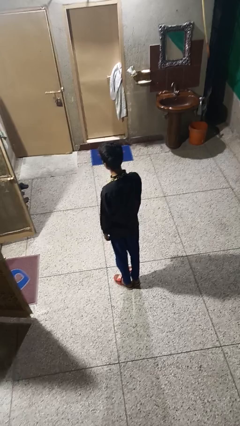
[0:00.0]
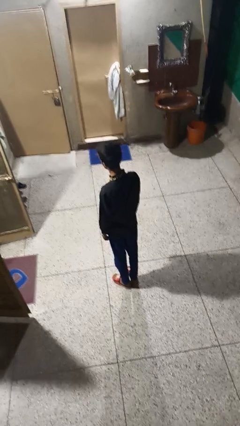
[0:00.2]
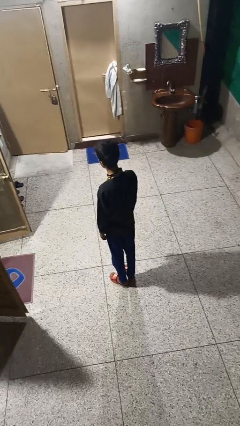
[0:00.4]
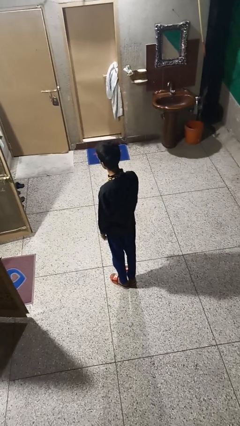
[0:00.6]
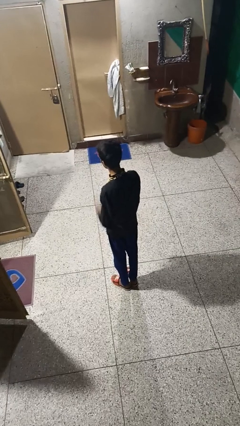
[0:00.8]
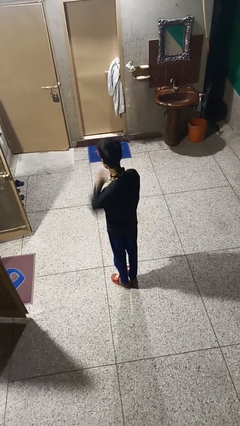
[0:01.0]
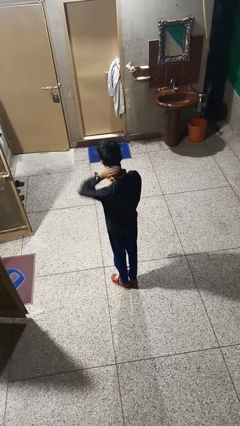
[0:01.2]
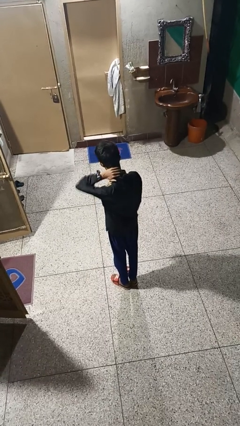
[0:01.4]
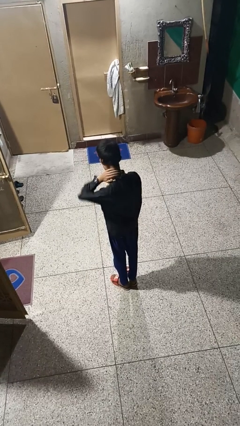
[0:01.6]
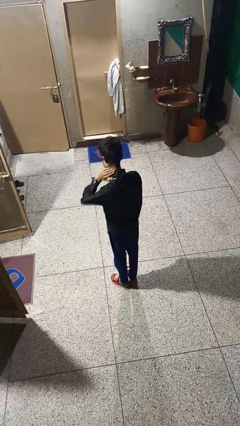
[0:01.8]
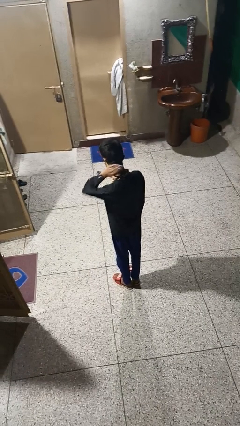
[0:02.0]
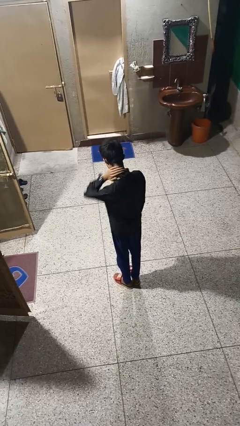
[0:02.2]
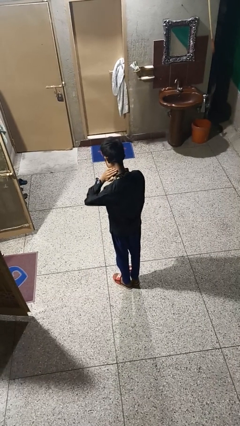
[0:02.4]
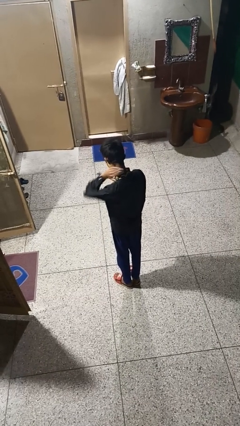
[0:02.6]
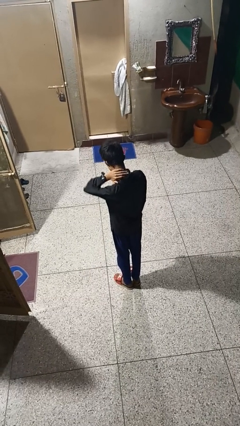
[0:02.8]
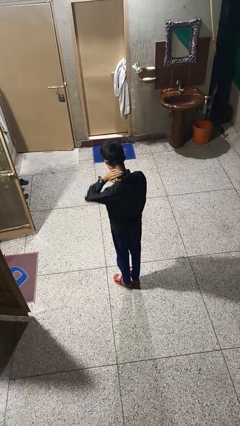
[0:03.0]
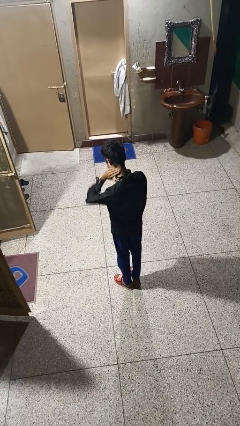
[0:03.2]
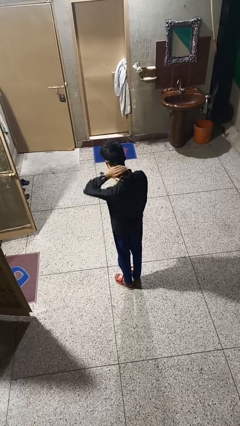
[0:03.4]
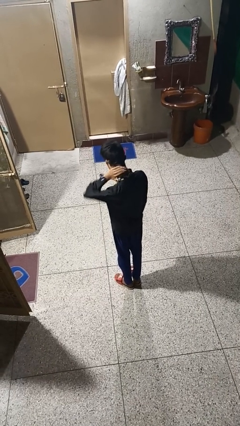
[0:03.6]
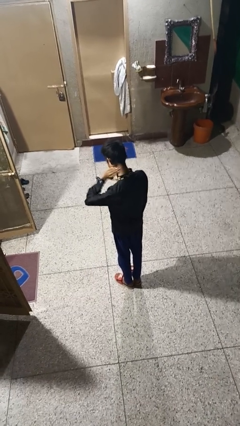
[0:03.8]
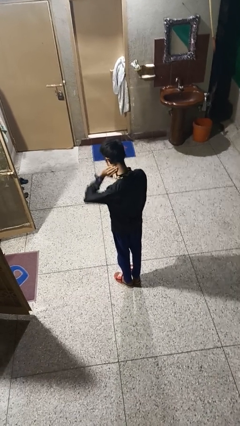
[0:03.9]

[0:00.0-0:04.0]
person rubs neck

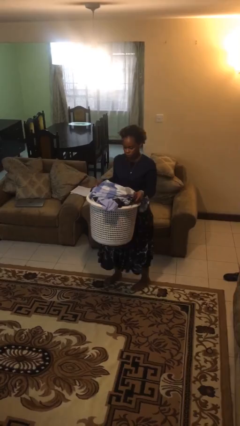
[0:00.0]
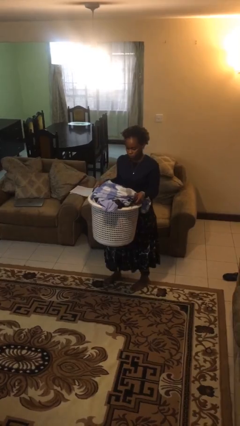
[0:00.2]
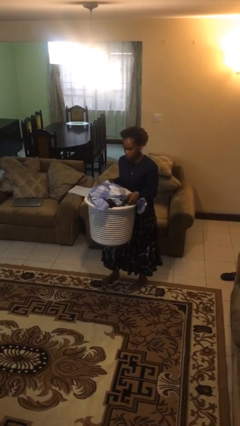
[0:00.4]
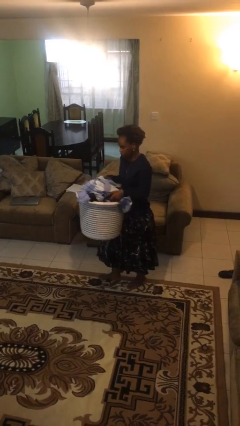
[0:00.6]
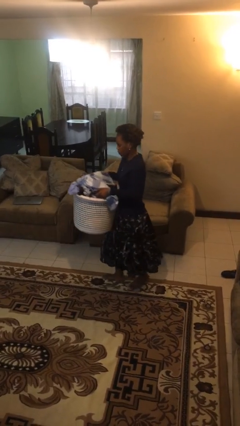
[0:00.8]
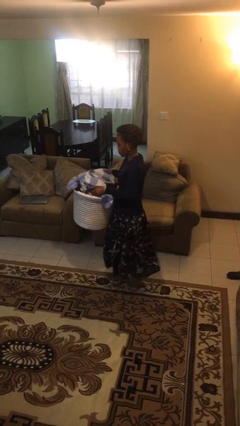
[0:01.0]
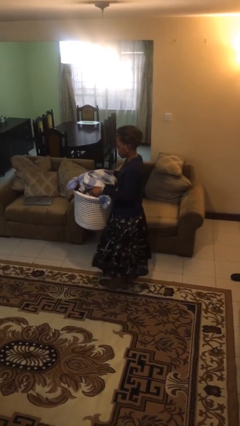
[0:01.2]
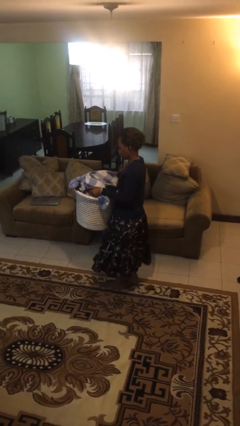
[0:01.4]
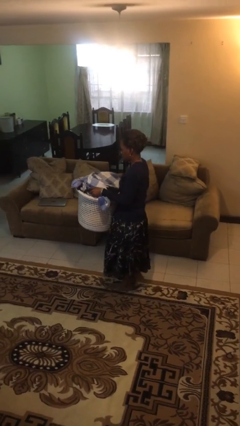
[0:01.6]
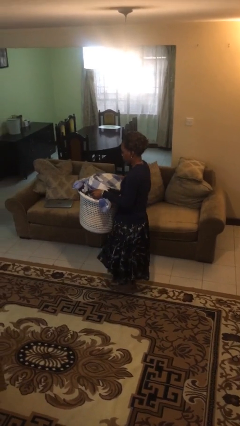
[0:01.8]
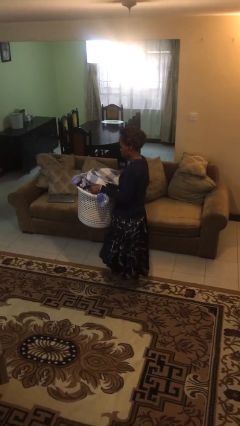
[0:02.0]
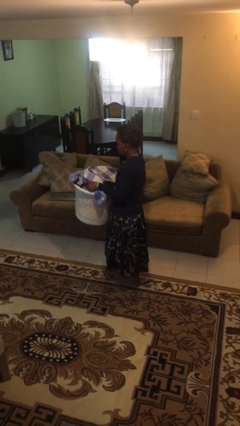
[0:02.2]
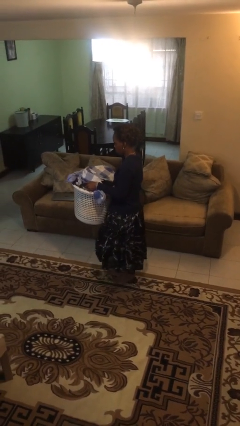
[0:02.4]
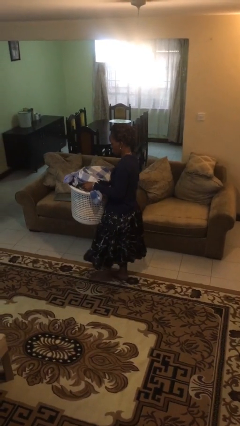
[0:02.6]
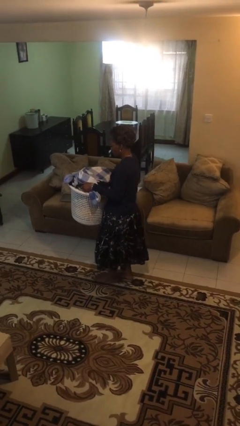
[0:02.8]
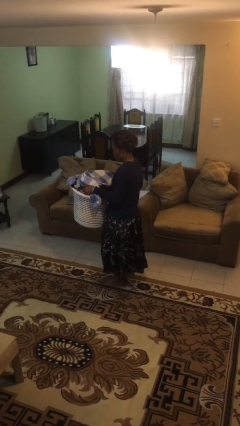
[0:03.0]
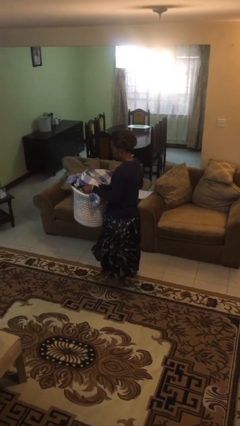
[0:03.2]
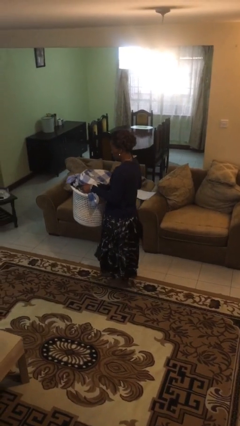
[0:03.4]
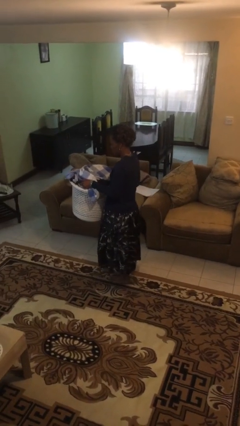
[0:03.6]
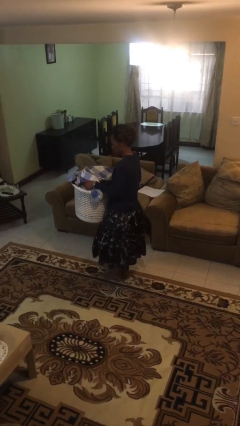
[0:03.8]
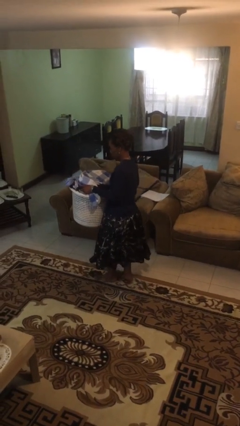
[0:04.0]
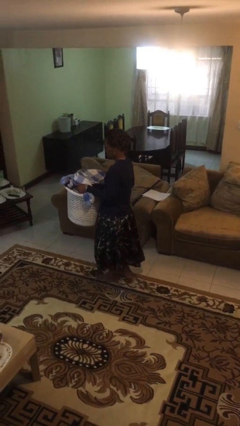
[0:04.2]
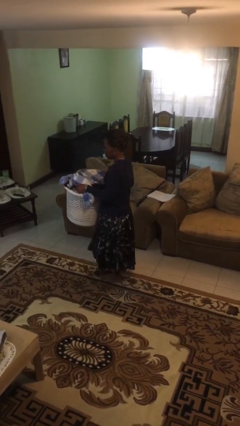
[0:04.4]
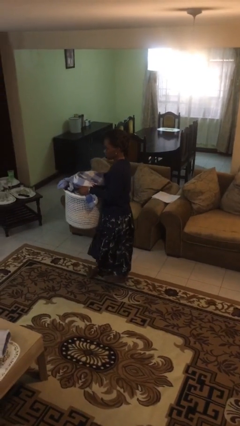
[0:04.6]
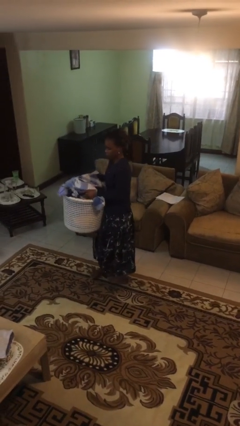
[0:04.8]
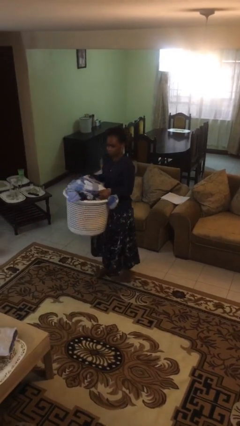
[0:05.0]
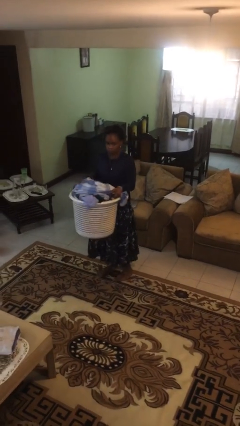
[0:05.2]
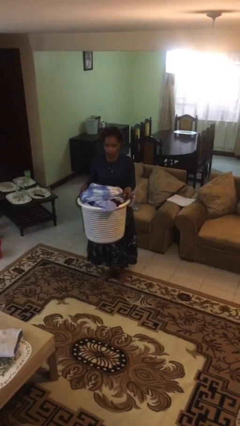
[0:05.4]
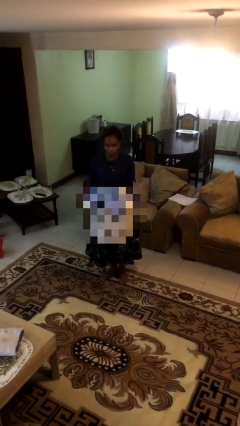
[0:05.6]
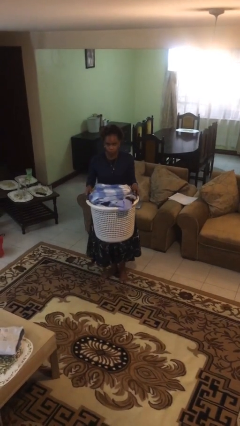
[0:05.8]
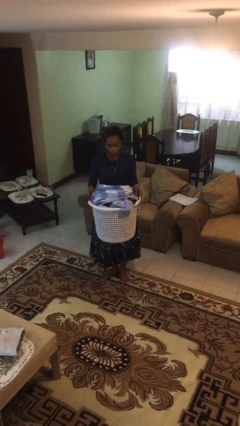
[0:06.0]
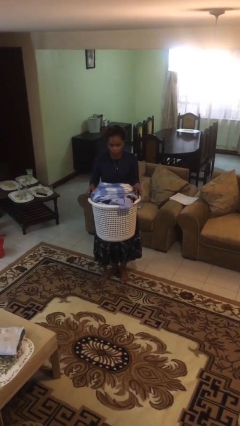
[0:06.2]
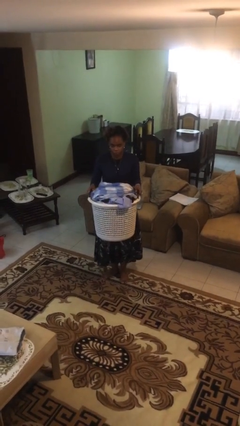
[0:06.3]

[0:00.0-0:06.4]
person carries heavy object

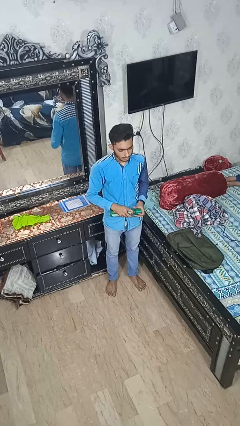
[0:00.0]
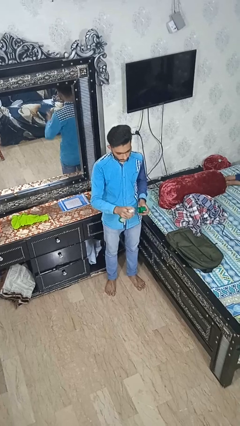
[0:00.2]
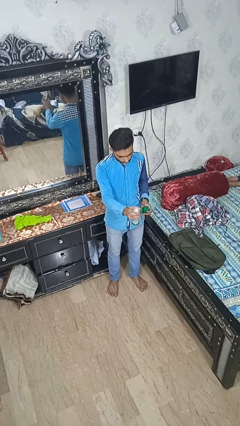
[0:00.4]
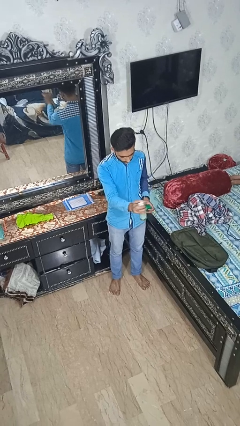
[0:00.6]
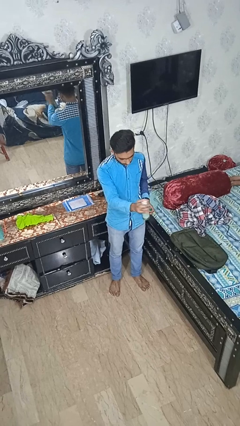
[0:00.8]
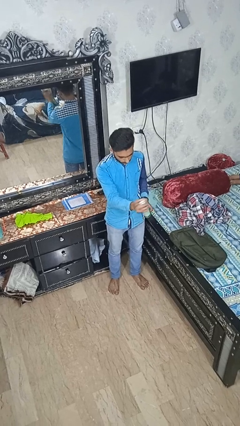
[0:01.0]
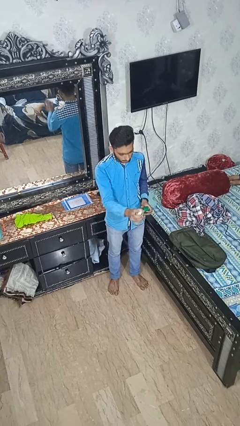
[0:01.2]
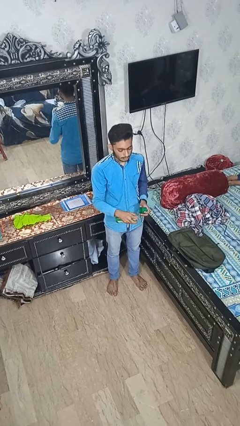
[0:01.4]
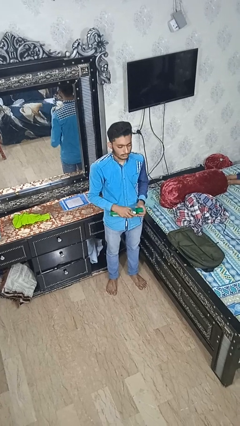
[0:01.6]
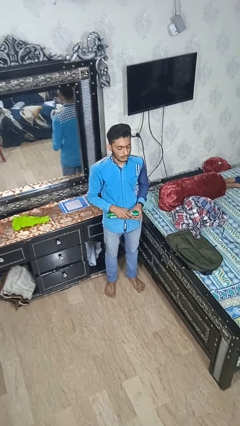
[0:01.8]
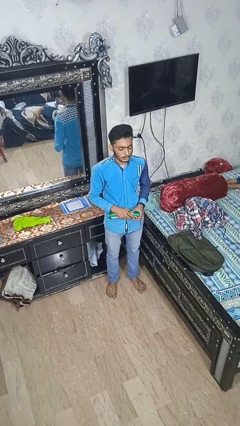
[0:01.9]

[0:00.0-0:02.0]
person sprays from bottle

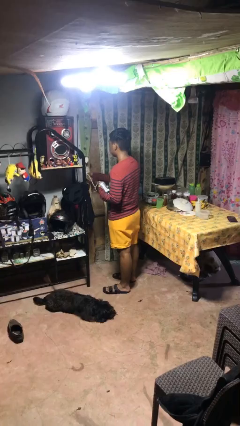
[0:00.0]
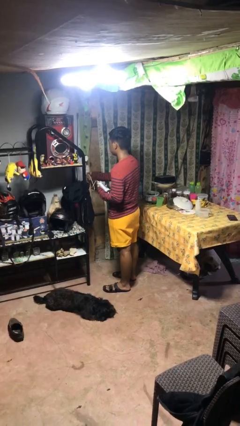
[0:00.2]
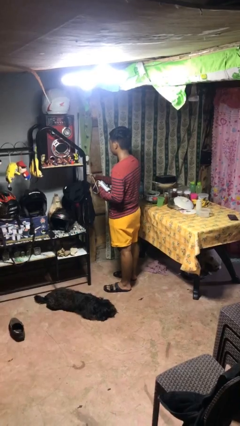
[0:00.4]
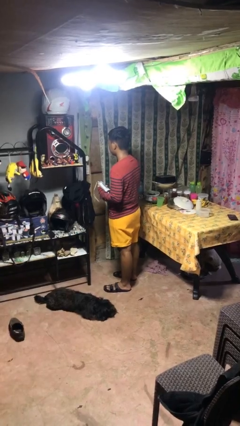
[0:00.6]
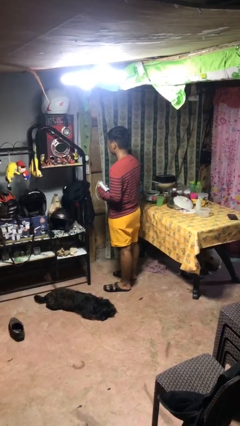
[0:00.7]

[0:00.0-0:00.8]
person unplugs from electrical socket

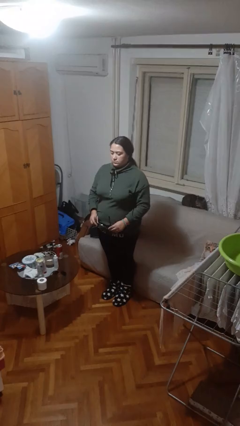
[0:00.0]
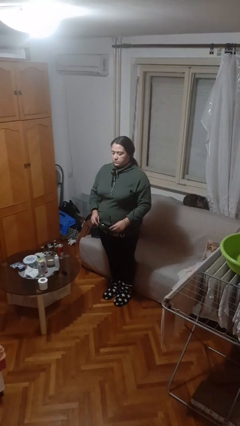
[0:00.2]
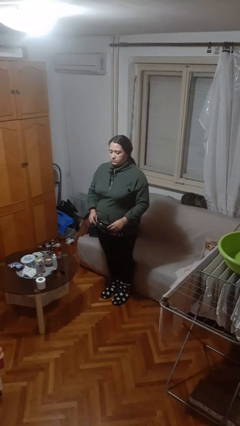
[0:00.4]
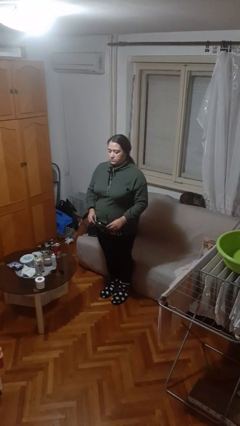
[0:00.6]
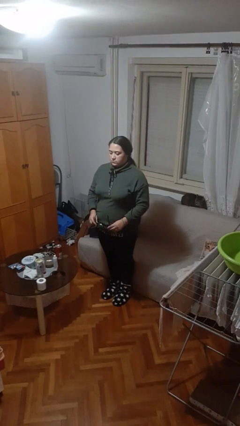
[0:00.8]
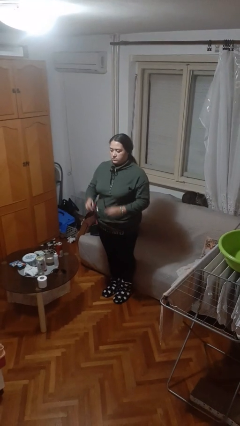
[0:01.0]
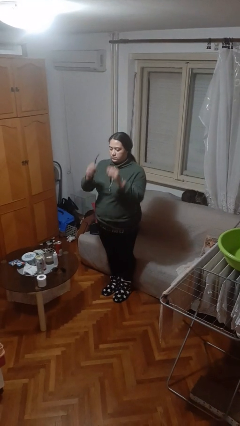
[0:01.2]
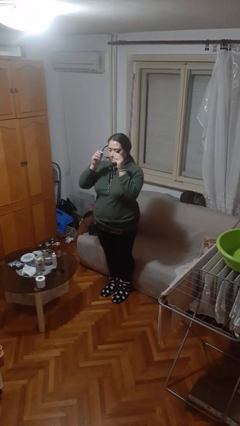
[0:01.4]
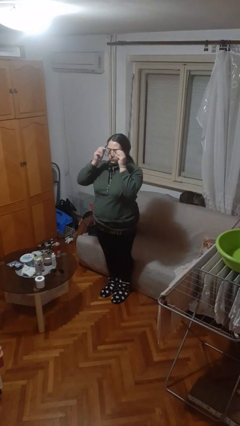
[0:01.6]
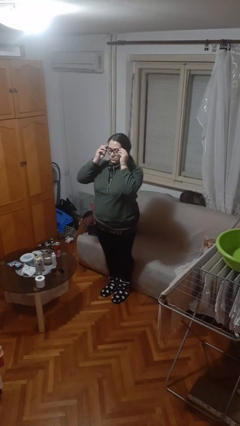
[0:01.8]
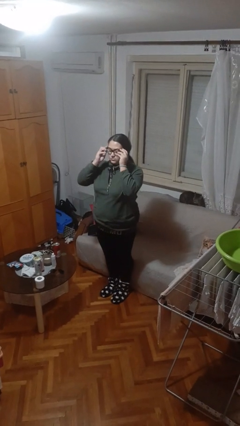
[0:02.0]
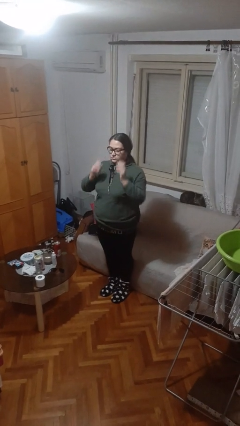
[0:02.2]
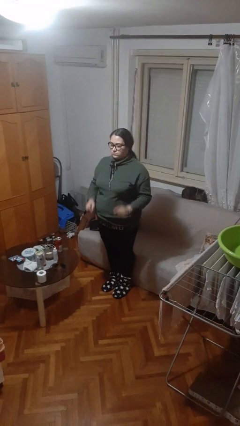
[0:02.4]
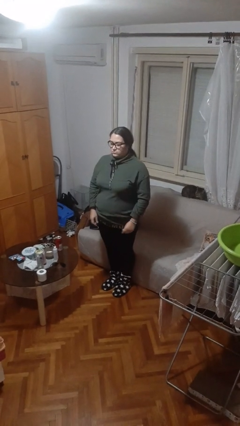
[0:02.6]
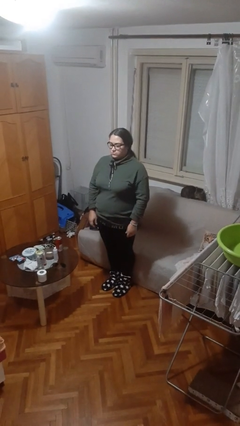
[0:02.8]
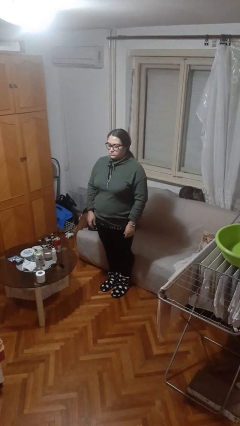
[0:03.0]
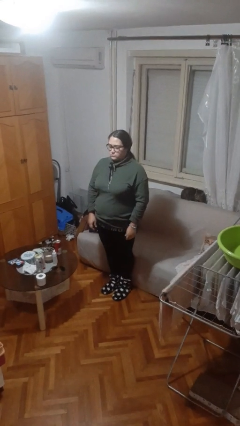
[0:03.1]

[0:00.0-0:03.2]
person puts on glasses

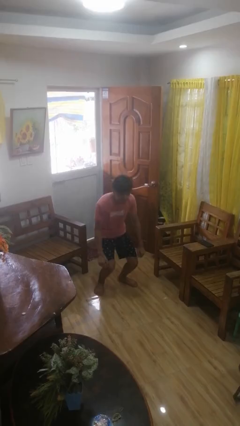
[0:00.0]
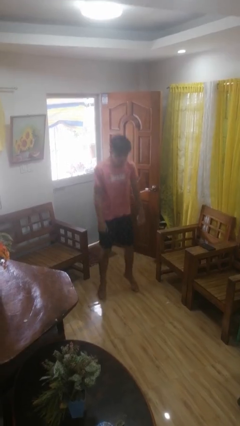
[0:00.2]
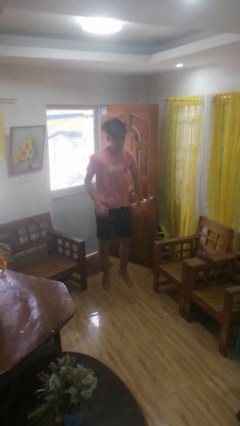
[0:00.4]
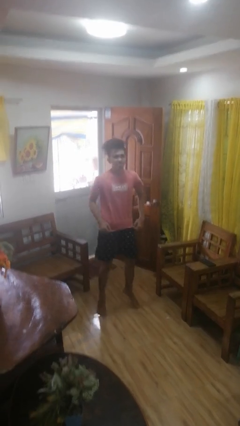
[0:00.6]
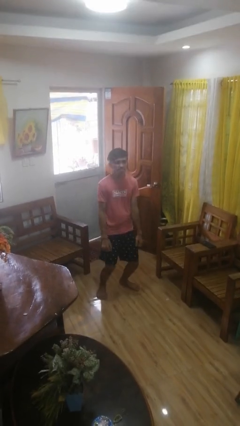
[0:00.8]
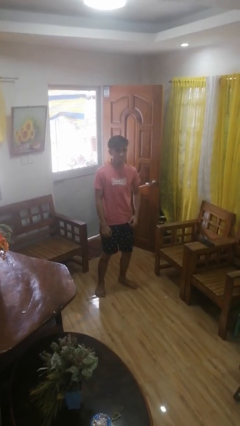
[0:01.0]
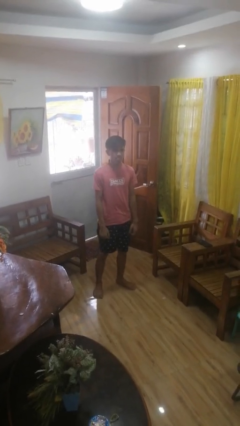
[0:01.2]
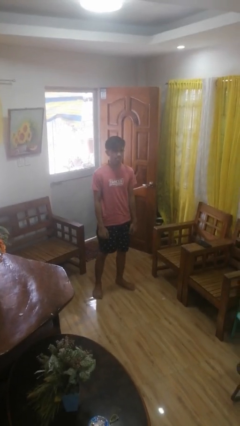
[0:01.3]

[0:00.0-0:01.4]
person jumps
